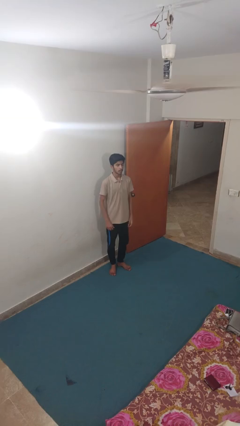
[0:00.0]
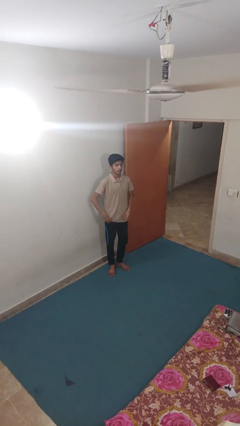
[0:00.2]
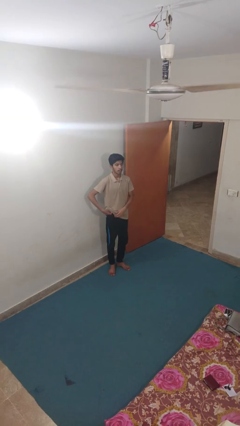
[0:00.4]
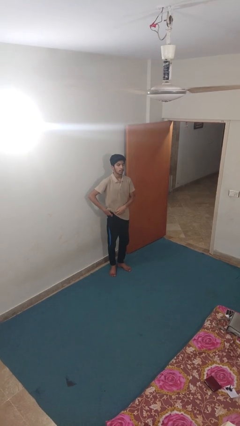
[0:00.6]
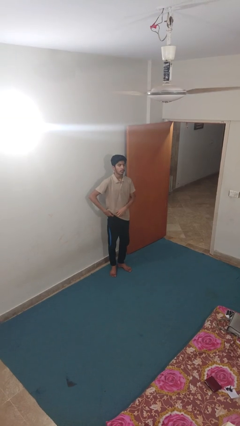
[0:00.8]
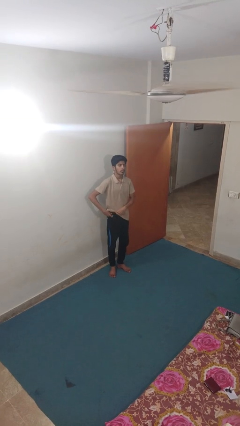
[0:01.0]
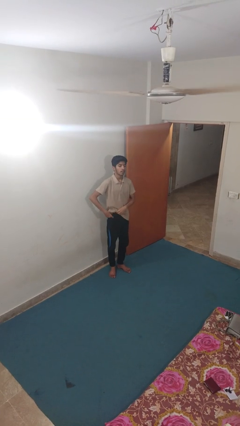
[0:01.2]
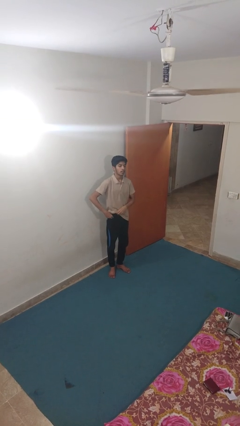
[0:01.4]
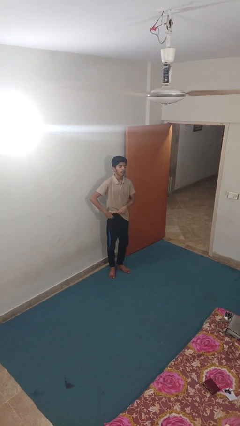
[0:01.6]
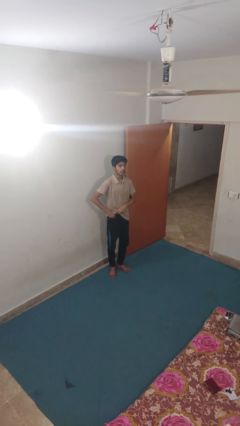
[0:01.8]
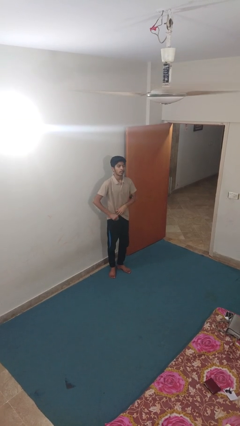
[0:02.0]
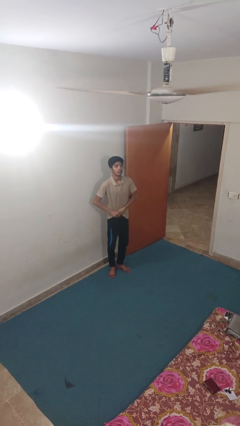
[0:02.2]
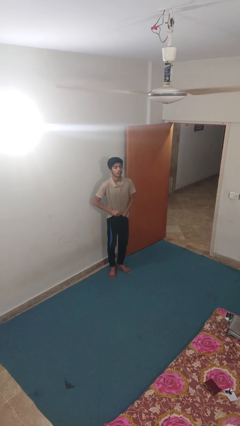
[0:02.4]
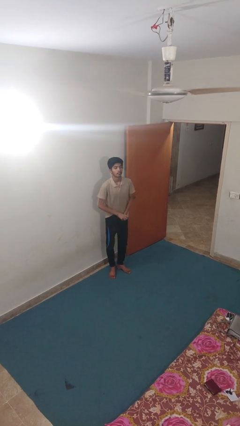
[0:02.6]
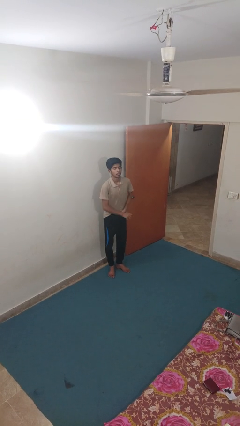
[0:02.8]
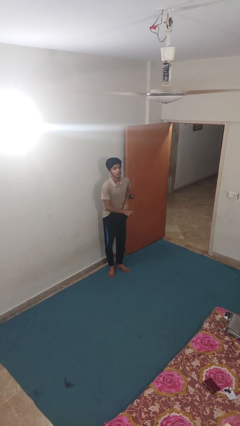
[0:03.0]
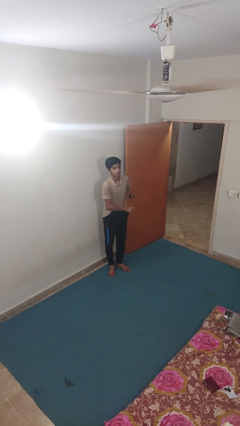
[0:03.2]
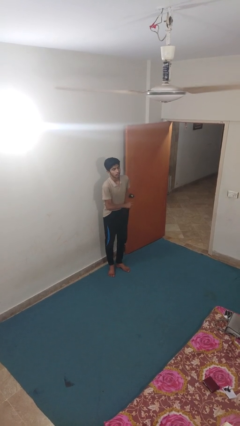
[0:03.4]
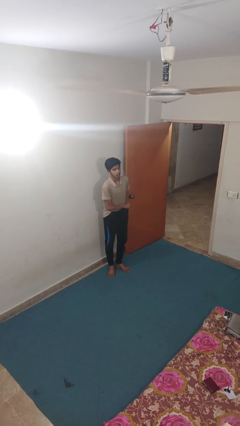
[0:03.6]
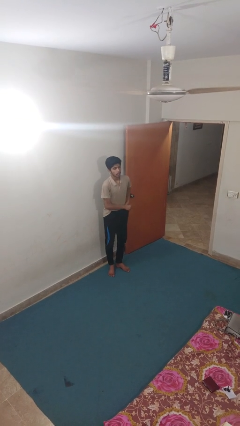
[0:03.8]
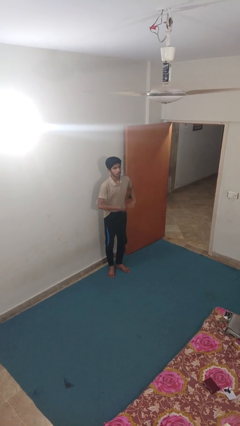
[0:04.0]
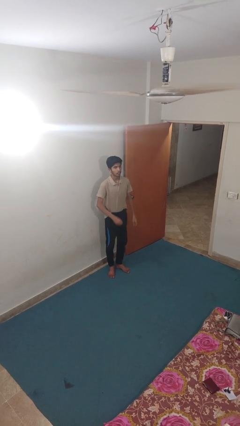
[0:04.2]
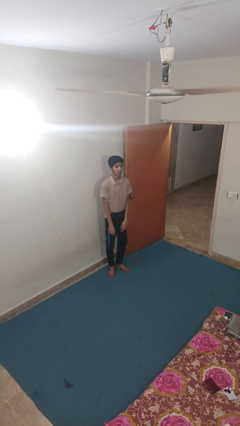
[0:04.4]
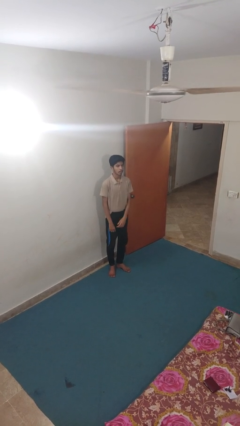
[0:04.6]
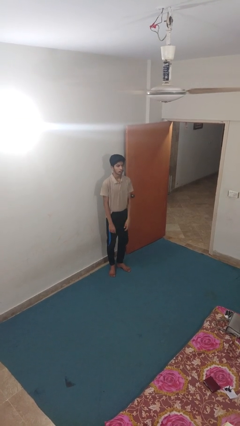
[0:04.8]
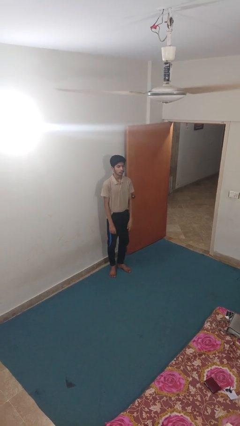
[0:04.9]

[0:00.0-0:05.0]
person tucks in shirt

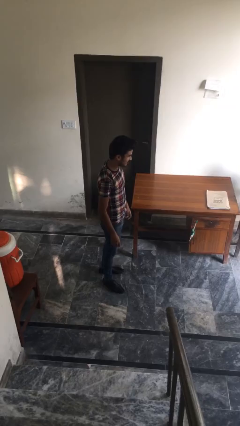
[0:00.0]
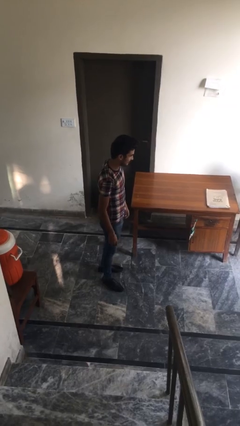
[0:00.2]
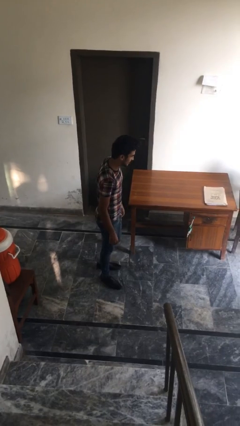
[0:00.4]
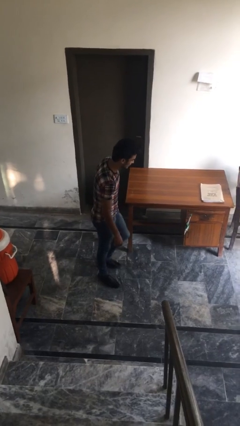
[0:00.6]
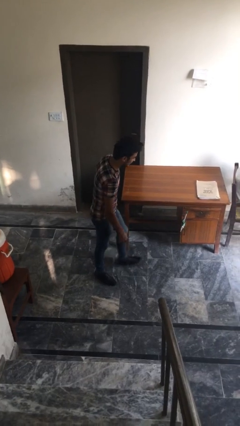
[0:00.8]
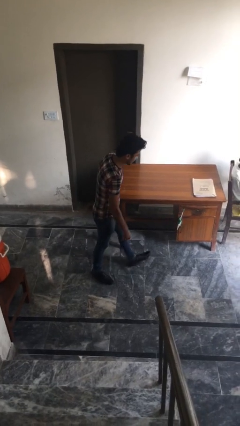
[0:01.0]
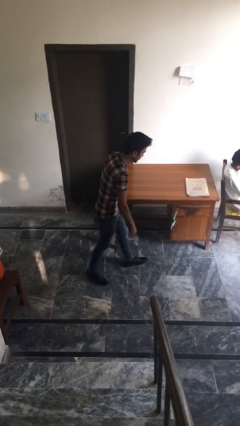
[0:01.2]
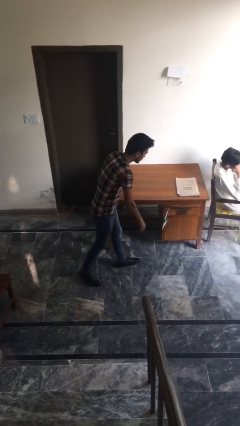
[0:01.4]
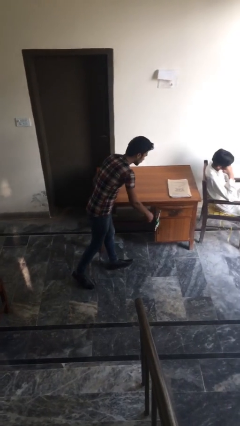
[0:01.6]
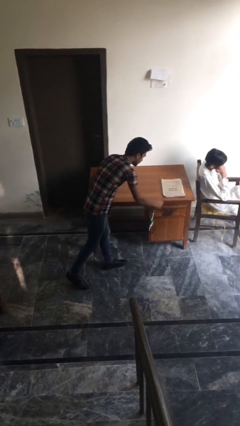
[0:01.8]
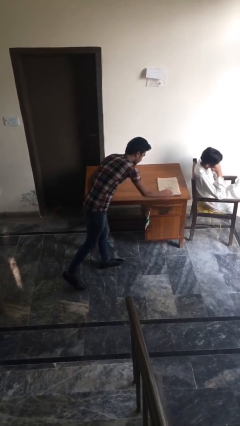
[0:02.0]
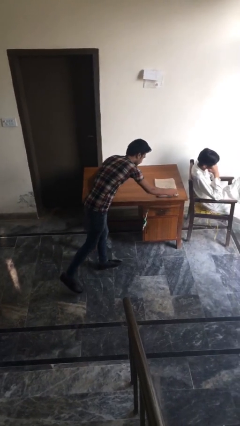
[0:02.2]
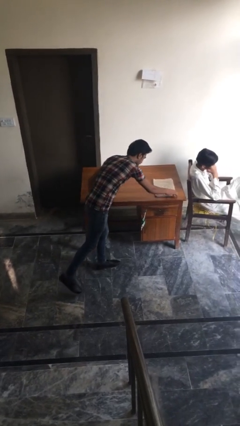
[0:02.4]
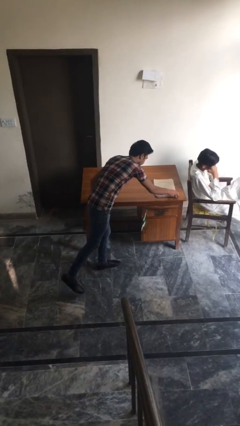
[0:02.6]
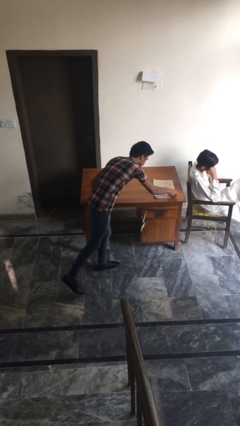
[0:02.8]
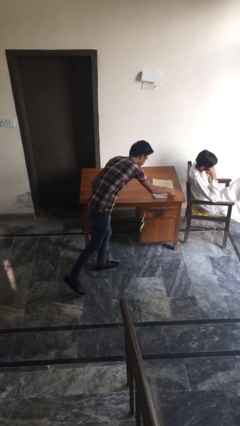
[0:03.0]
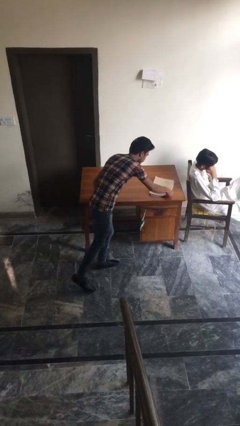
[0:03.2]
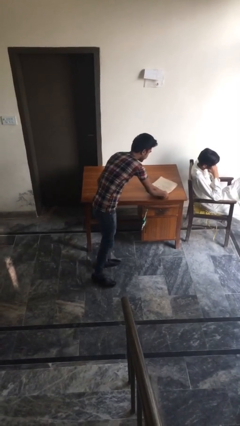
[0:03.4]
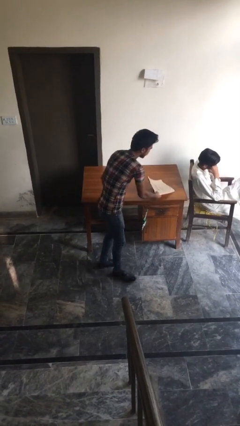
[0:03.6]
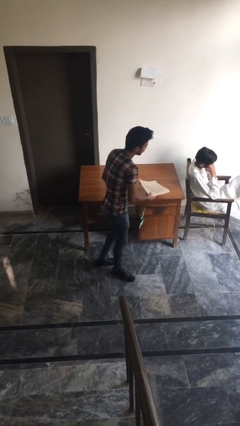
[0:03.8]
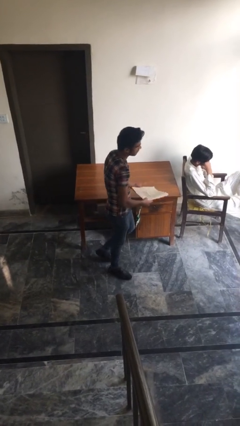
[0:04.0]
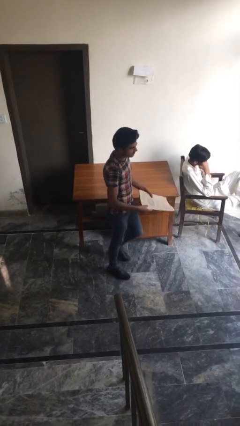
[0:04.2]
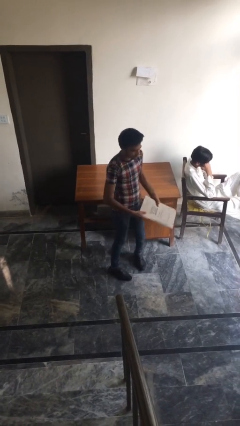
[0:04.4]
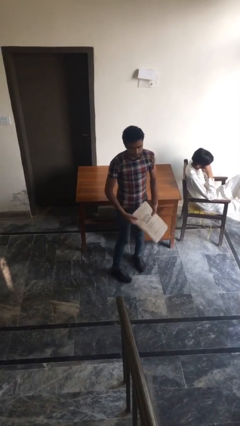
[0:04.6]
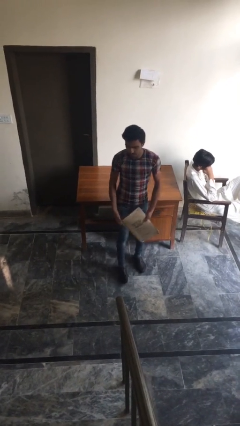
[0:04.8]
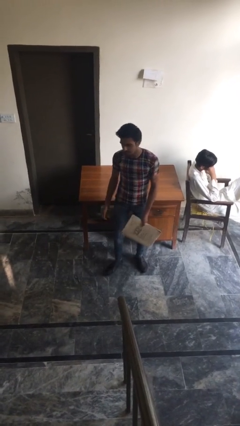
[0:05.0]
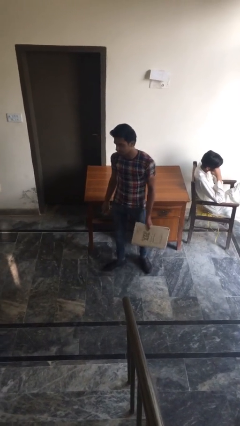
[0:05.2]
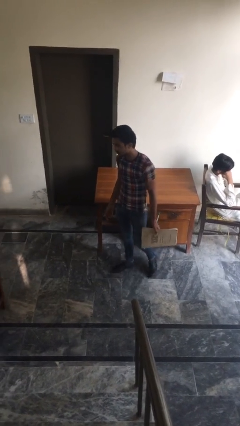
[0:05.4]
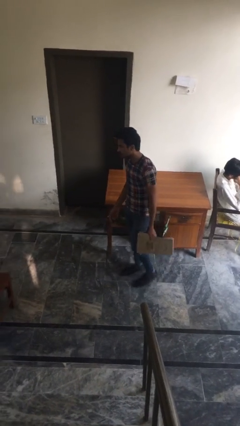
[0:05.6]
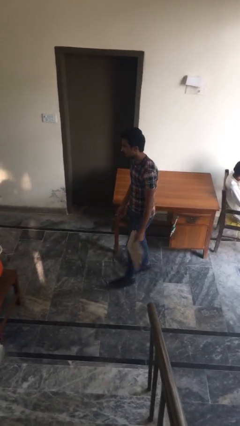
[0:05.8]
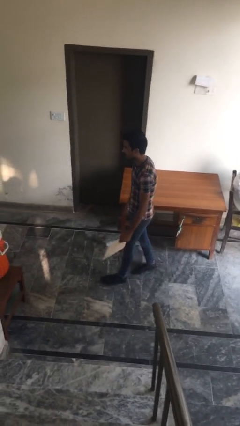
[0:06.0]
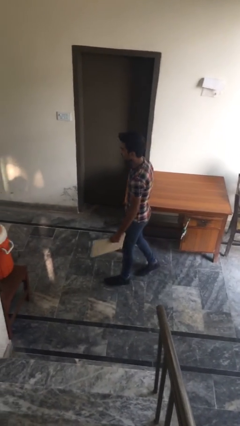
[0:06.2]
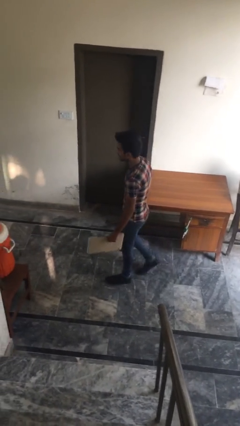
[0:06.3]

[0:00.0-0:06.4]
person steals object from person

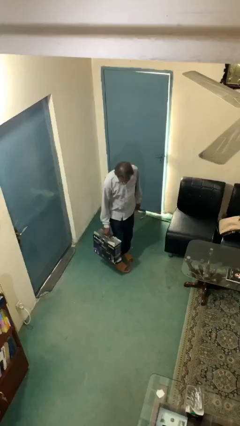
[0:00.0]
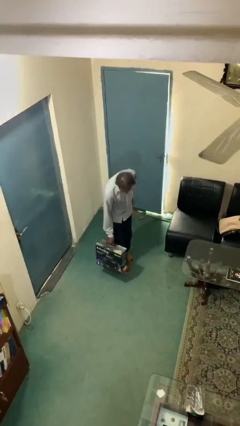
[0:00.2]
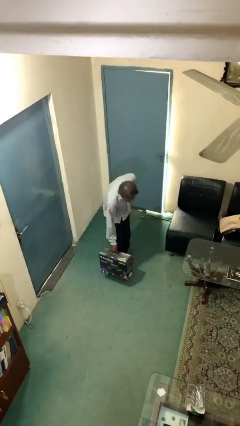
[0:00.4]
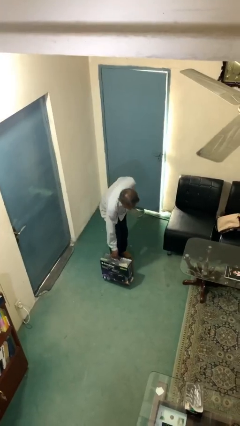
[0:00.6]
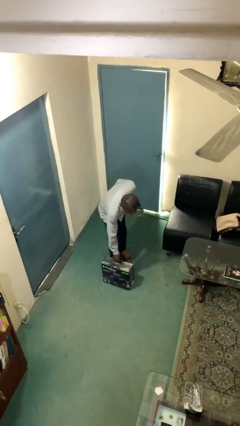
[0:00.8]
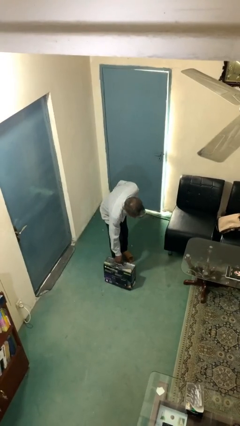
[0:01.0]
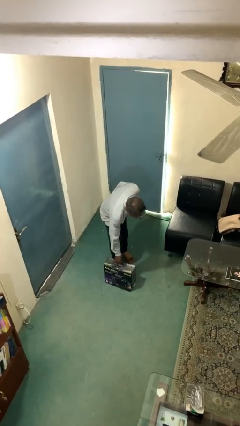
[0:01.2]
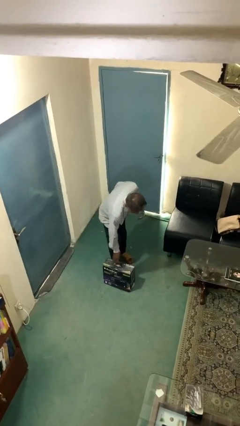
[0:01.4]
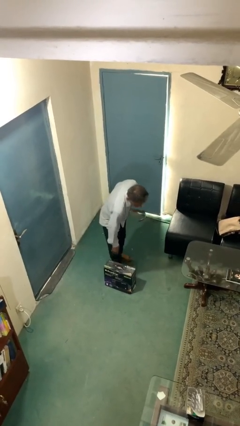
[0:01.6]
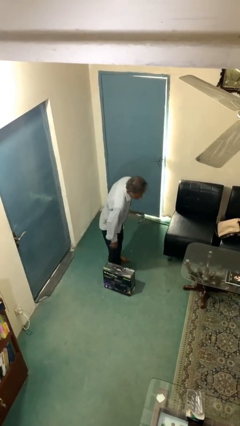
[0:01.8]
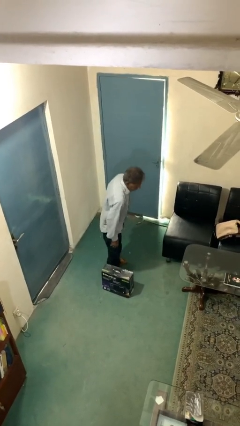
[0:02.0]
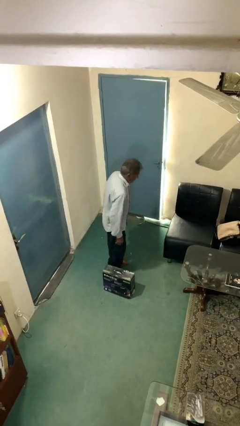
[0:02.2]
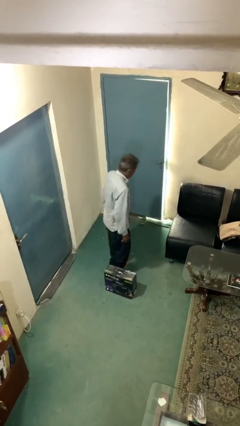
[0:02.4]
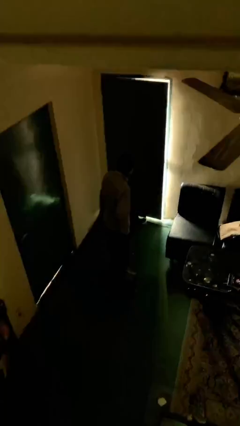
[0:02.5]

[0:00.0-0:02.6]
person puts down object on floor

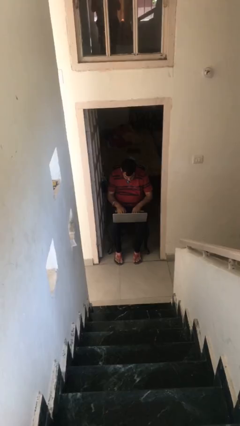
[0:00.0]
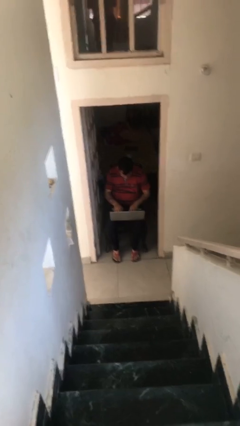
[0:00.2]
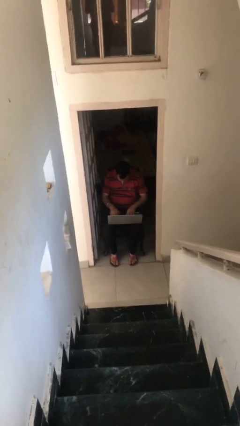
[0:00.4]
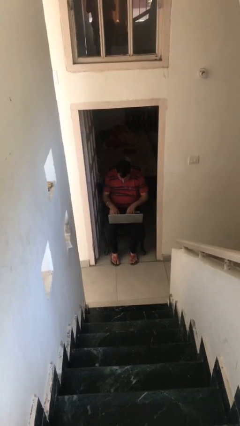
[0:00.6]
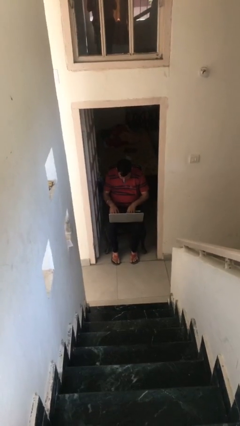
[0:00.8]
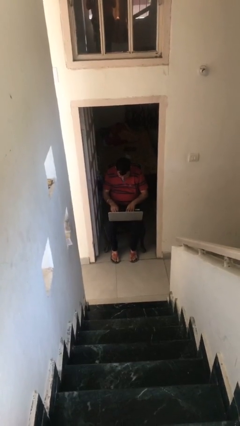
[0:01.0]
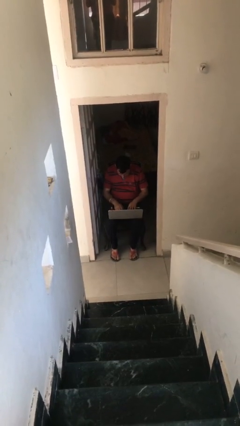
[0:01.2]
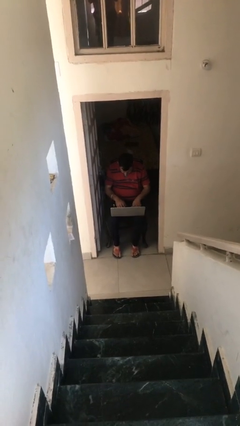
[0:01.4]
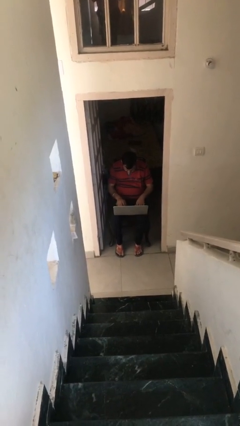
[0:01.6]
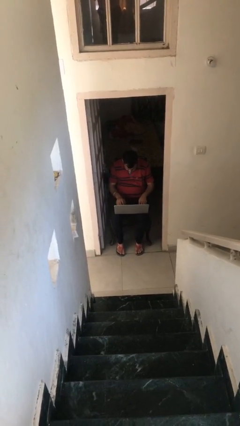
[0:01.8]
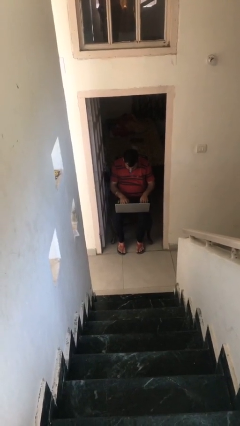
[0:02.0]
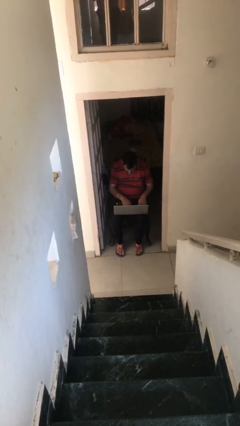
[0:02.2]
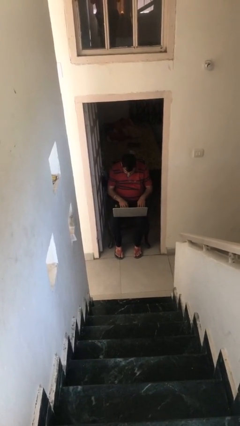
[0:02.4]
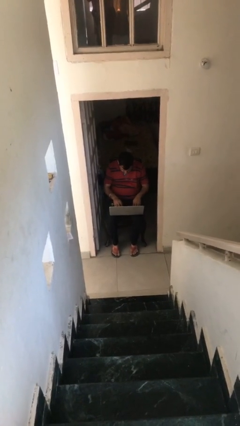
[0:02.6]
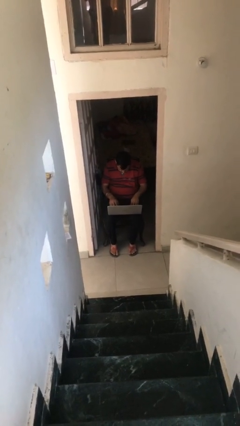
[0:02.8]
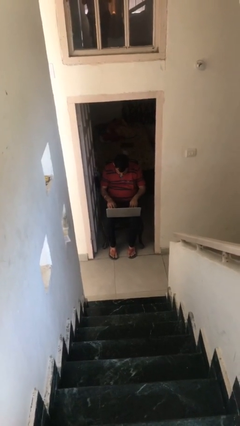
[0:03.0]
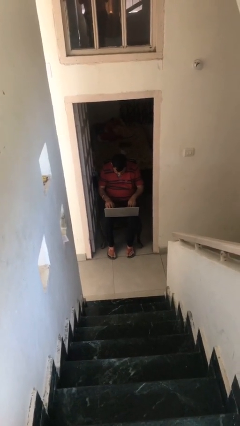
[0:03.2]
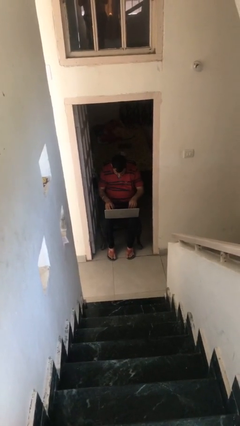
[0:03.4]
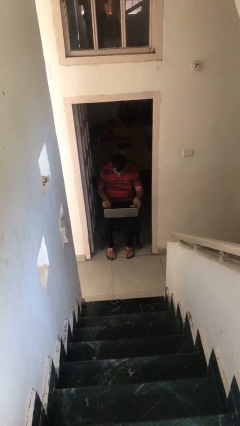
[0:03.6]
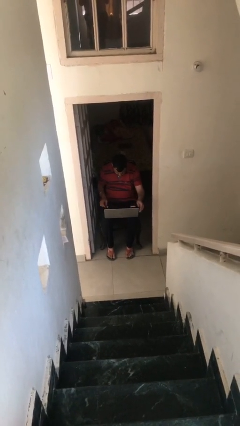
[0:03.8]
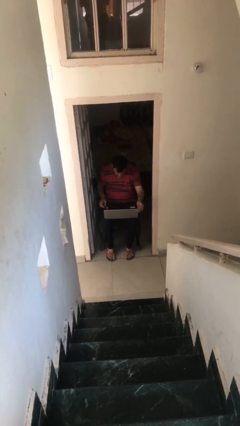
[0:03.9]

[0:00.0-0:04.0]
person interacts with laptop
